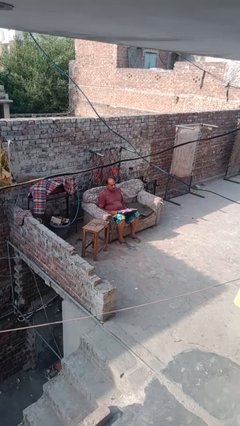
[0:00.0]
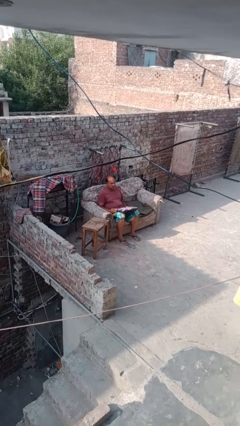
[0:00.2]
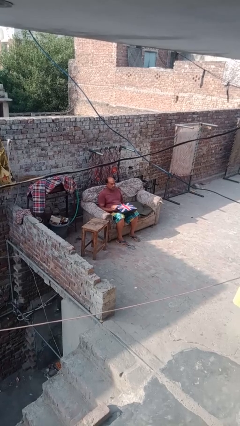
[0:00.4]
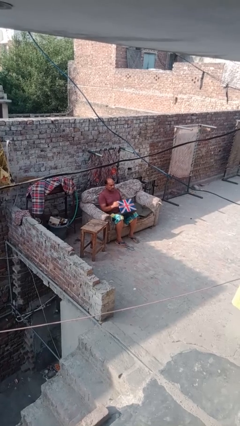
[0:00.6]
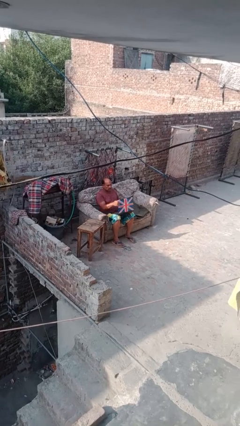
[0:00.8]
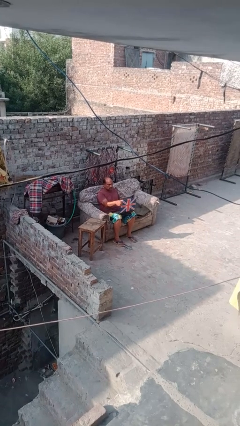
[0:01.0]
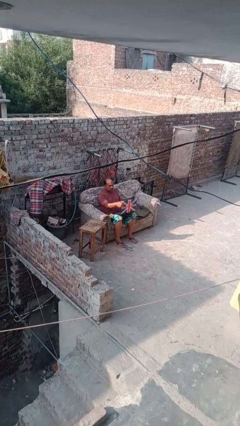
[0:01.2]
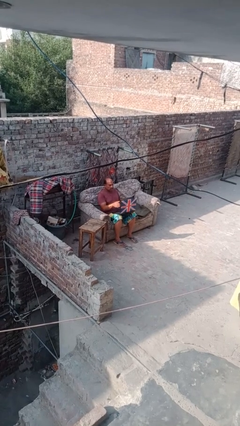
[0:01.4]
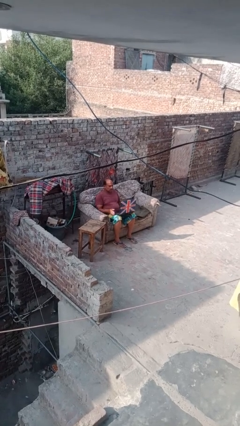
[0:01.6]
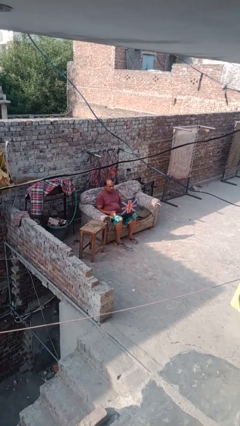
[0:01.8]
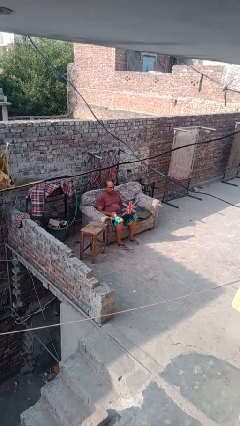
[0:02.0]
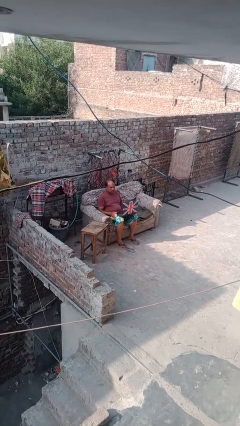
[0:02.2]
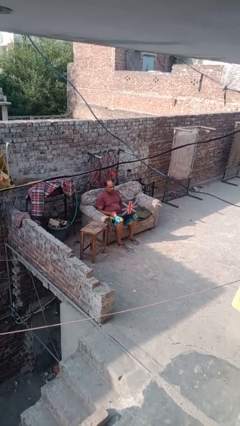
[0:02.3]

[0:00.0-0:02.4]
person opens laptop

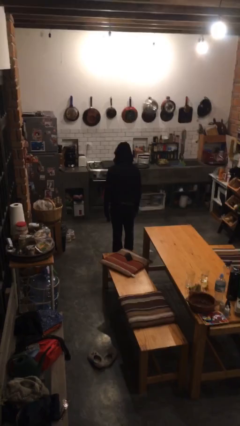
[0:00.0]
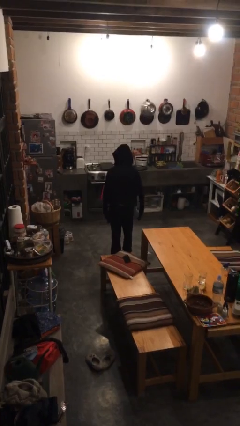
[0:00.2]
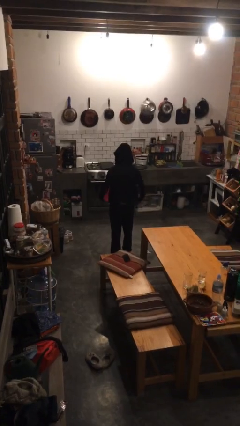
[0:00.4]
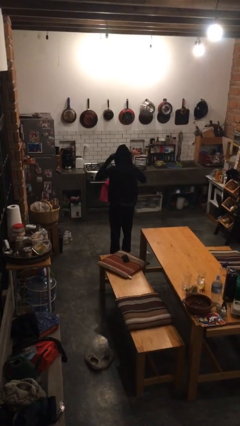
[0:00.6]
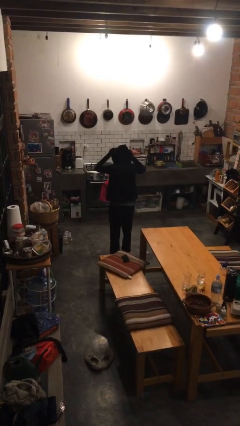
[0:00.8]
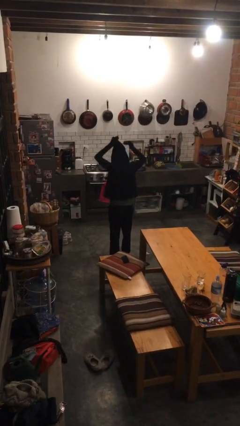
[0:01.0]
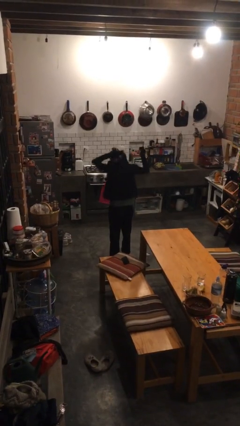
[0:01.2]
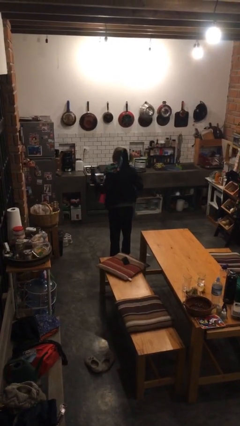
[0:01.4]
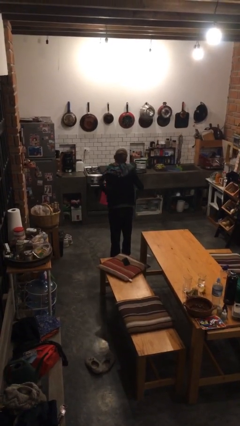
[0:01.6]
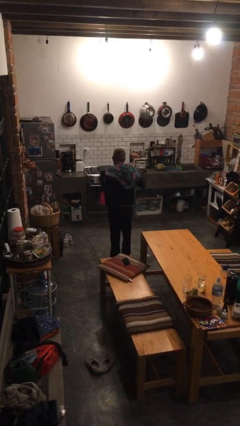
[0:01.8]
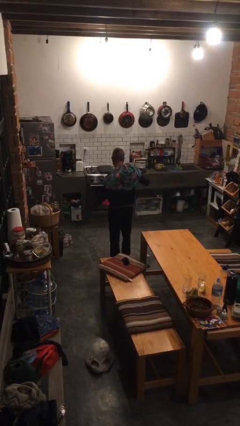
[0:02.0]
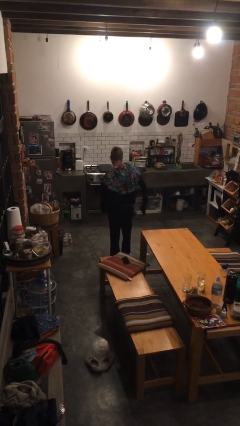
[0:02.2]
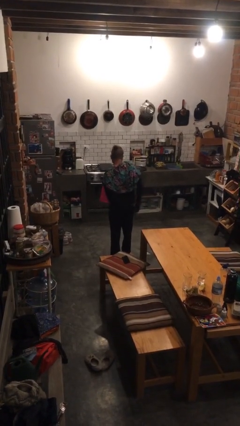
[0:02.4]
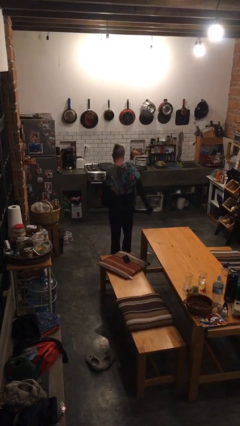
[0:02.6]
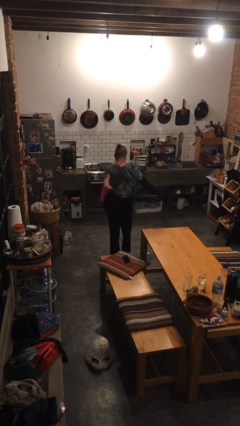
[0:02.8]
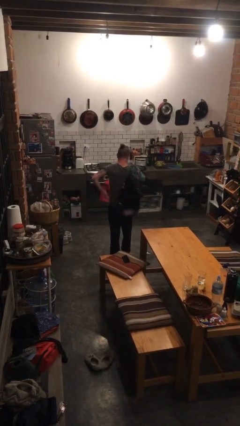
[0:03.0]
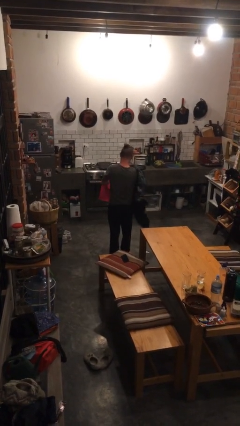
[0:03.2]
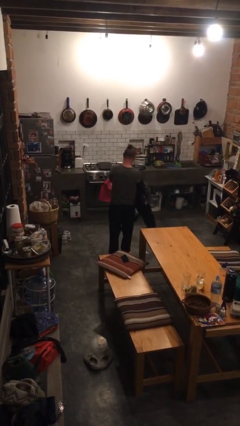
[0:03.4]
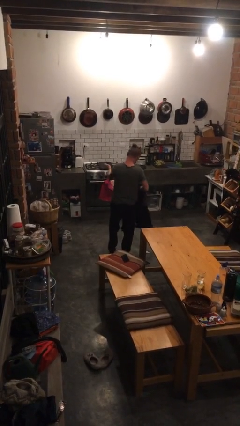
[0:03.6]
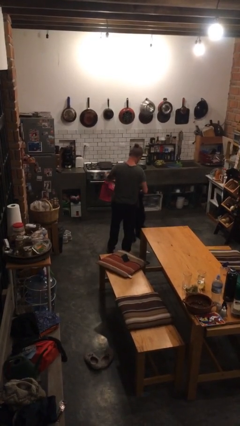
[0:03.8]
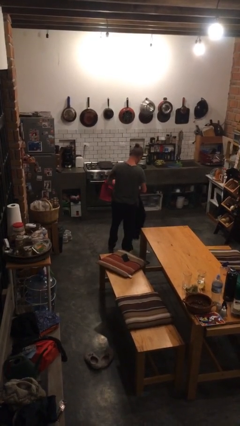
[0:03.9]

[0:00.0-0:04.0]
person takes off hoodie

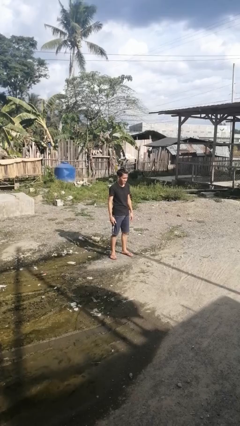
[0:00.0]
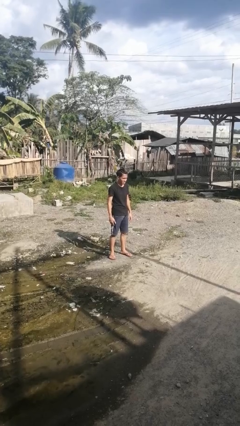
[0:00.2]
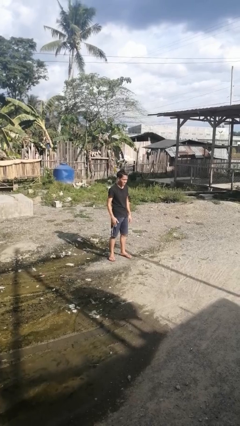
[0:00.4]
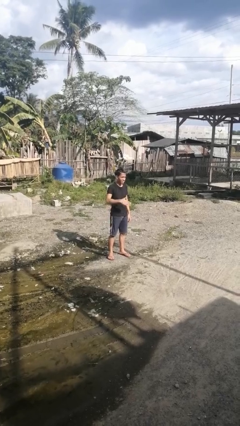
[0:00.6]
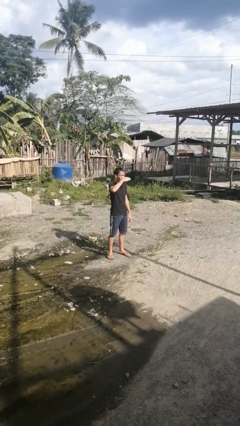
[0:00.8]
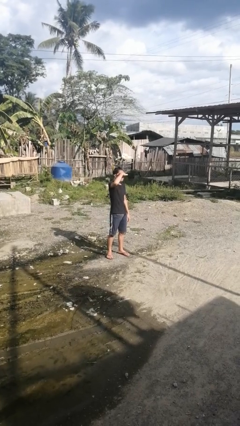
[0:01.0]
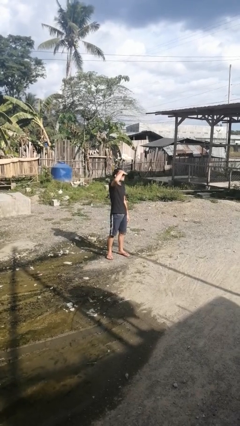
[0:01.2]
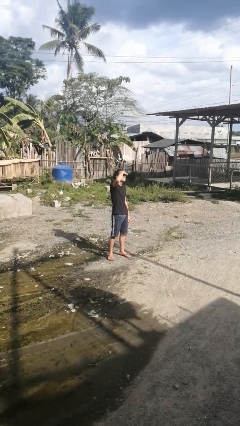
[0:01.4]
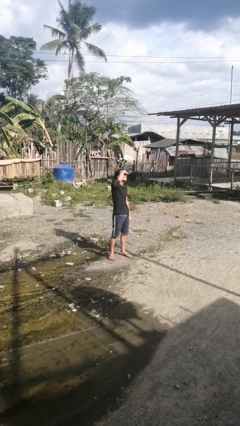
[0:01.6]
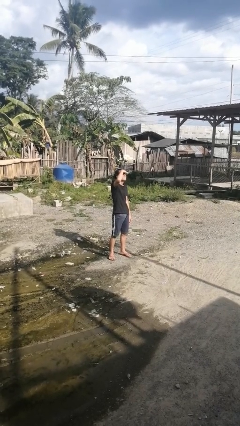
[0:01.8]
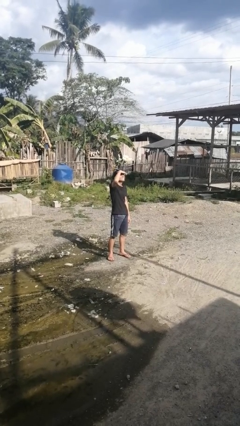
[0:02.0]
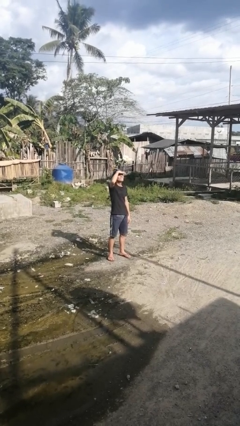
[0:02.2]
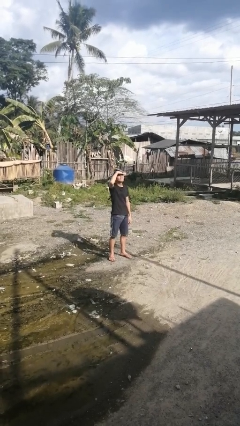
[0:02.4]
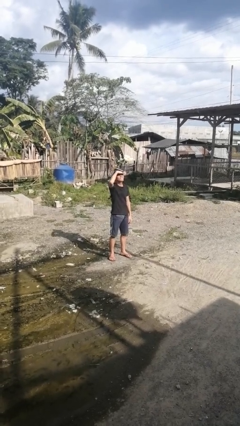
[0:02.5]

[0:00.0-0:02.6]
person shades eyes

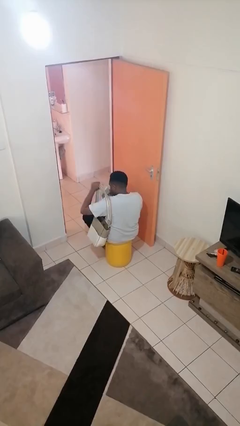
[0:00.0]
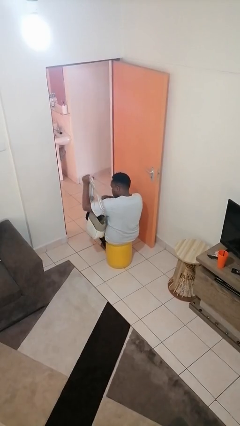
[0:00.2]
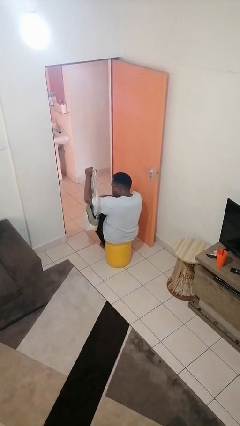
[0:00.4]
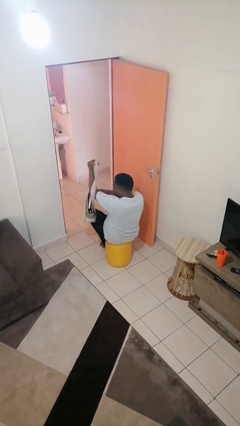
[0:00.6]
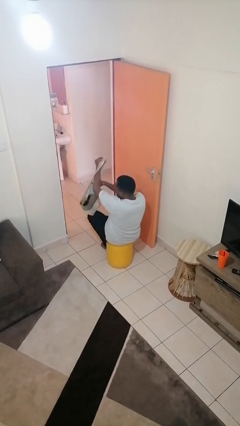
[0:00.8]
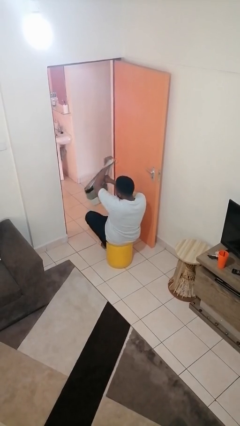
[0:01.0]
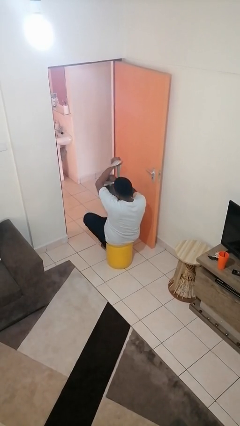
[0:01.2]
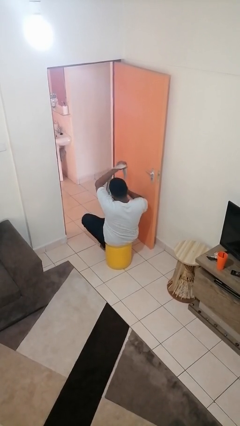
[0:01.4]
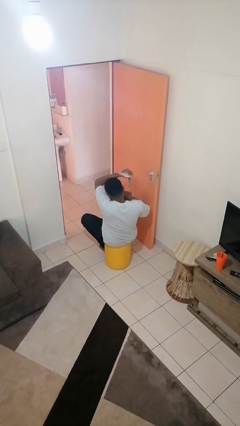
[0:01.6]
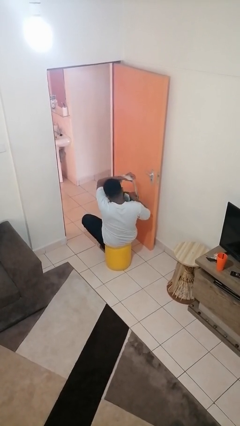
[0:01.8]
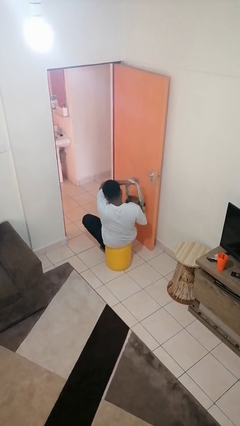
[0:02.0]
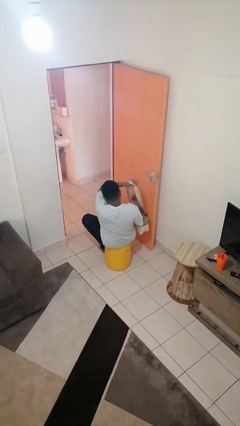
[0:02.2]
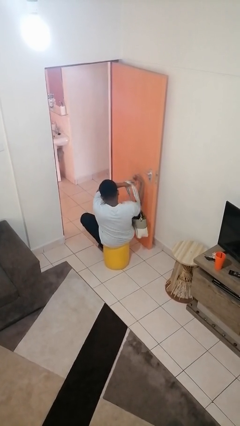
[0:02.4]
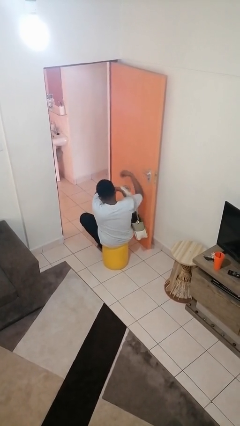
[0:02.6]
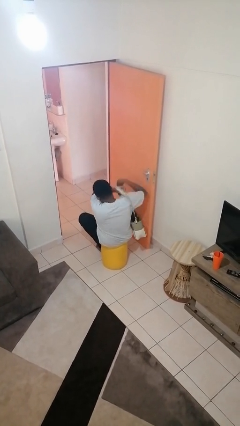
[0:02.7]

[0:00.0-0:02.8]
person puts object into purse

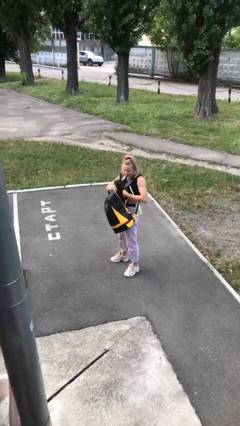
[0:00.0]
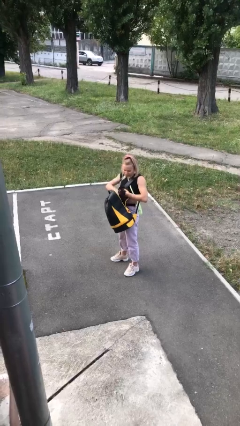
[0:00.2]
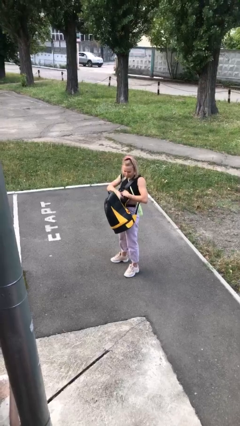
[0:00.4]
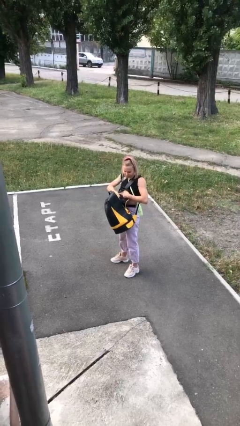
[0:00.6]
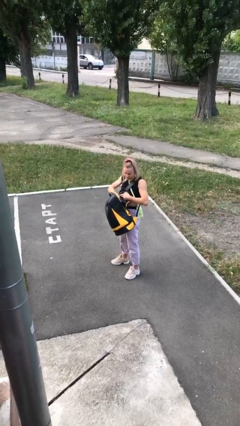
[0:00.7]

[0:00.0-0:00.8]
person puts object into backpack

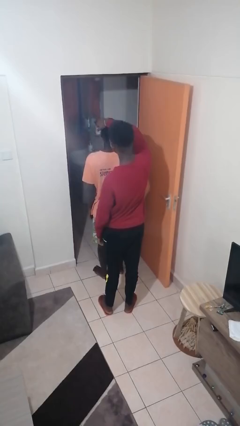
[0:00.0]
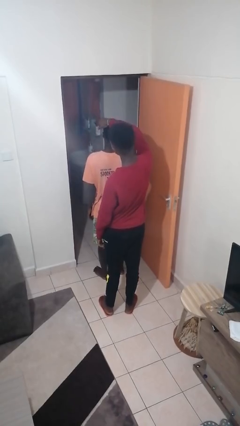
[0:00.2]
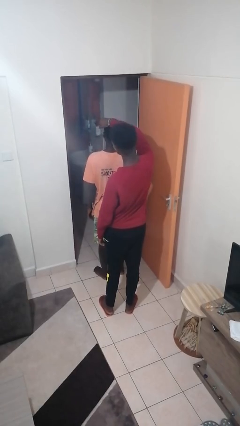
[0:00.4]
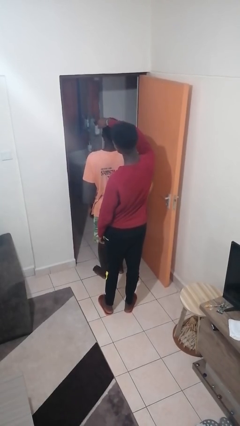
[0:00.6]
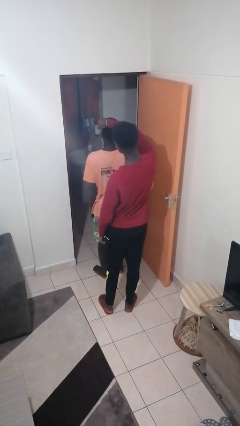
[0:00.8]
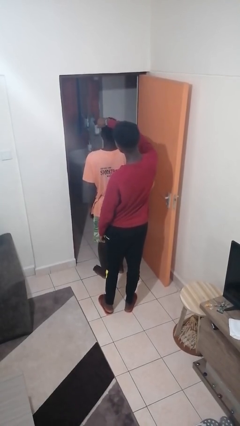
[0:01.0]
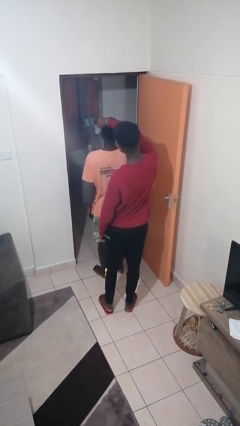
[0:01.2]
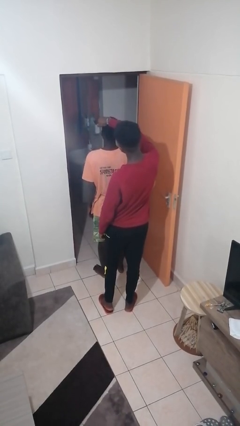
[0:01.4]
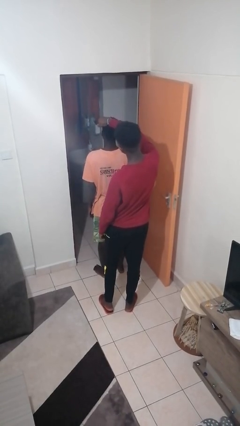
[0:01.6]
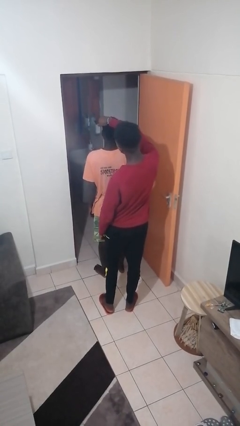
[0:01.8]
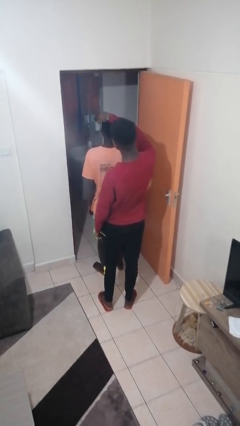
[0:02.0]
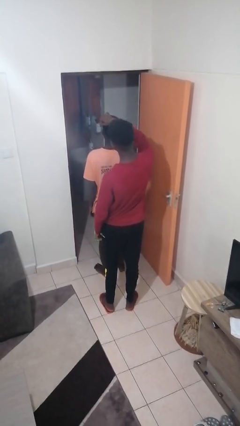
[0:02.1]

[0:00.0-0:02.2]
person grabs person by hair

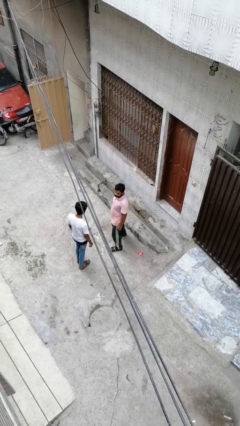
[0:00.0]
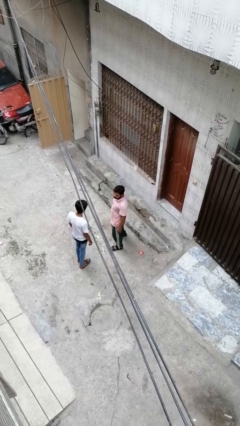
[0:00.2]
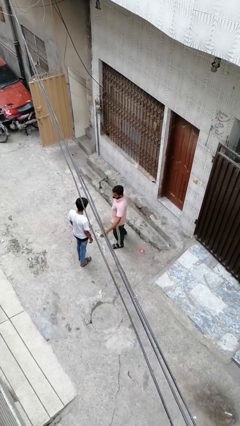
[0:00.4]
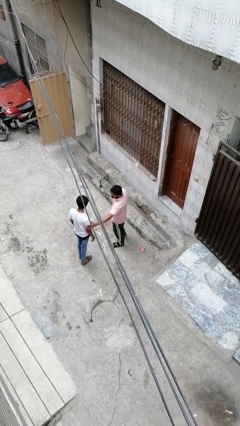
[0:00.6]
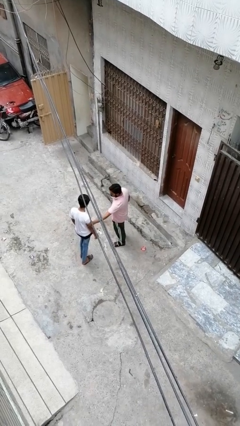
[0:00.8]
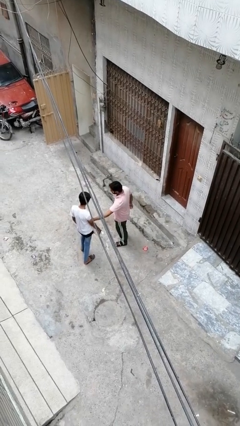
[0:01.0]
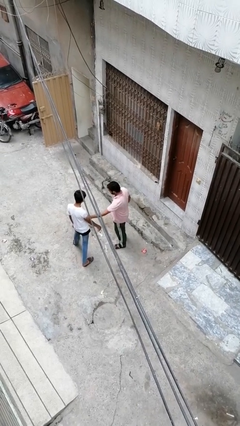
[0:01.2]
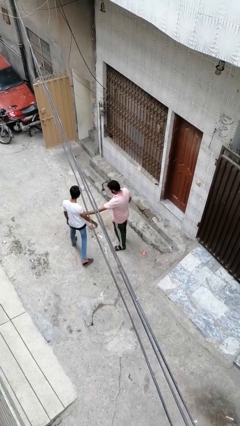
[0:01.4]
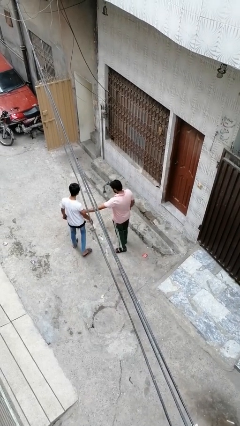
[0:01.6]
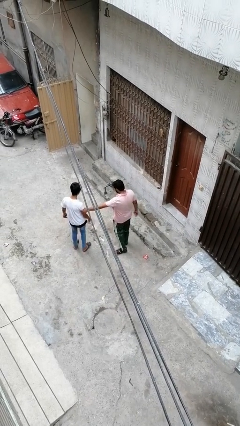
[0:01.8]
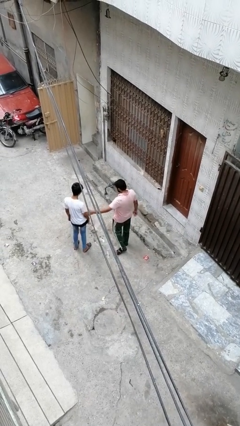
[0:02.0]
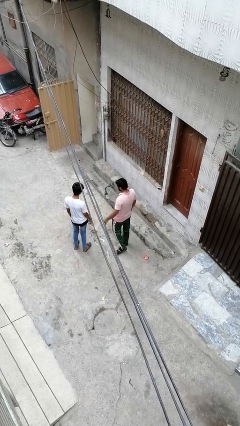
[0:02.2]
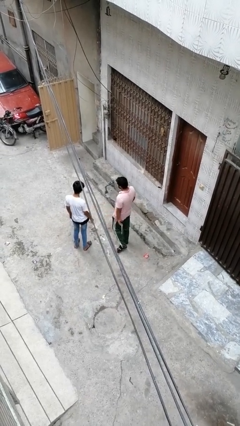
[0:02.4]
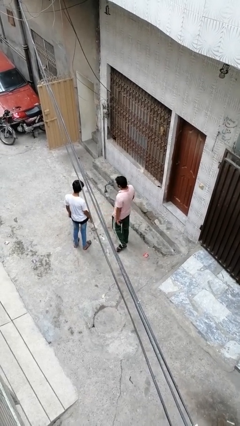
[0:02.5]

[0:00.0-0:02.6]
person grabs person by bicep
